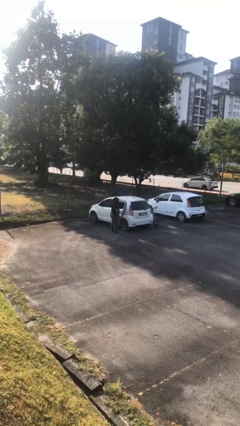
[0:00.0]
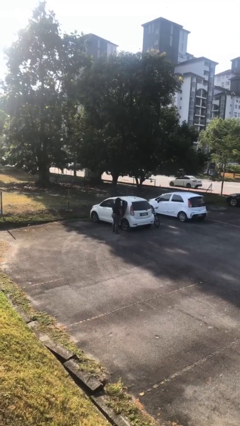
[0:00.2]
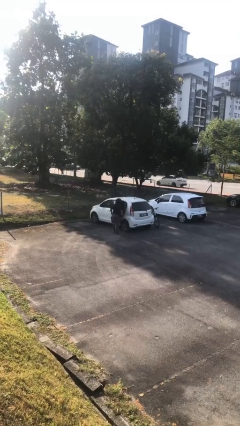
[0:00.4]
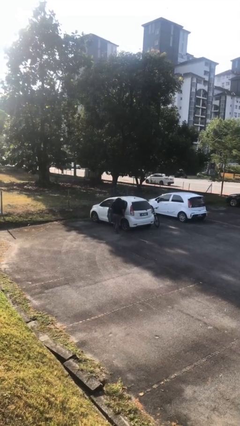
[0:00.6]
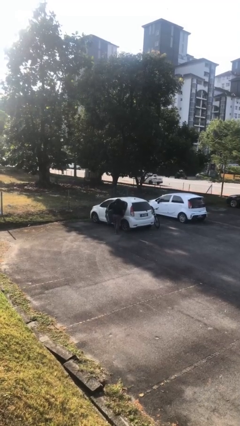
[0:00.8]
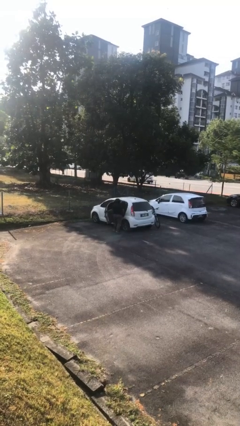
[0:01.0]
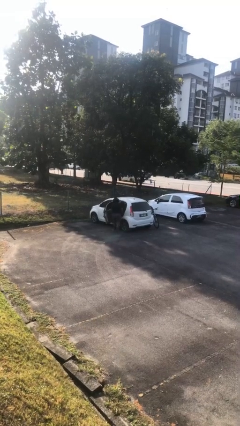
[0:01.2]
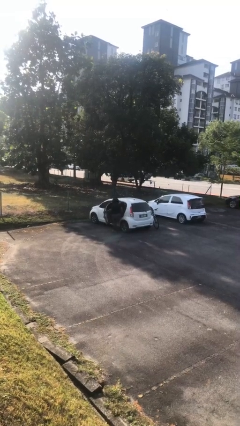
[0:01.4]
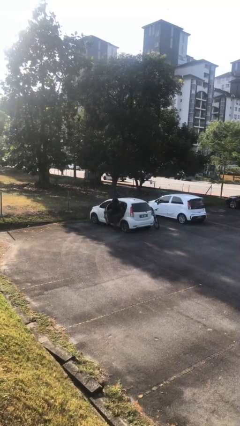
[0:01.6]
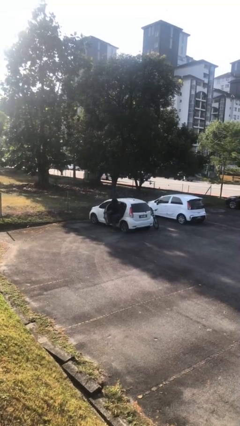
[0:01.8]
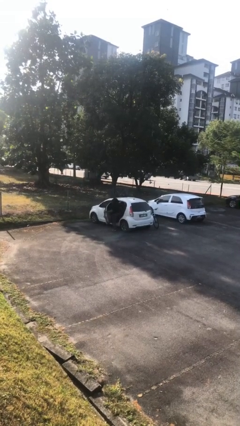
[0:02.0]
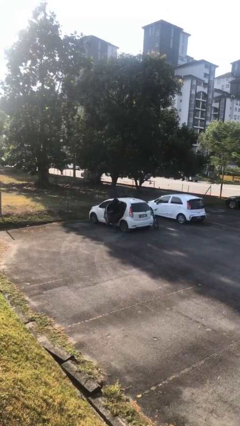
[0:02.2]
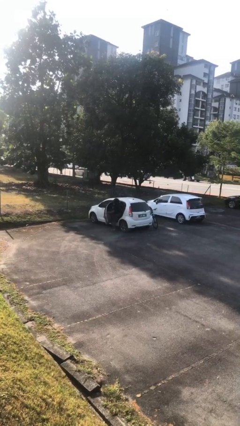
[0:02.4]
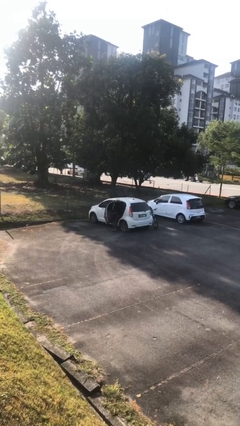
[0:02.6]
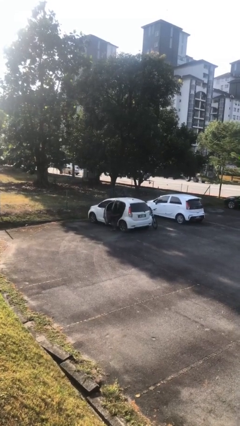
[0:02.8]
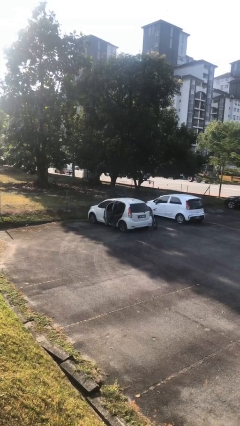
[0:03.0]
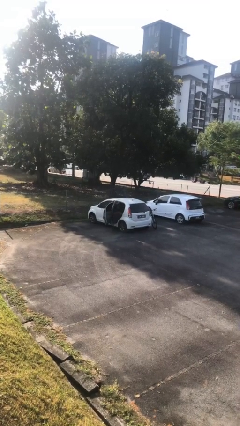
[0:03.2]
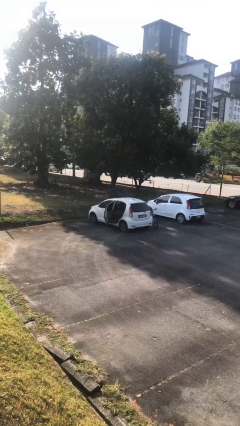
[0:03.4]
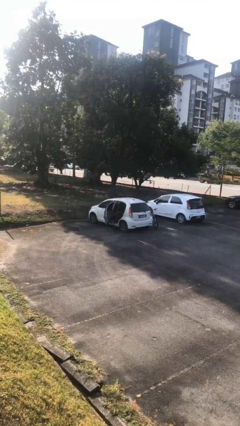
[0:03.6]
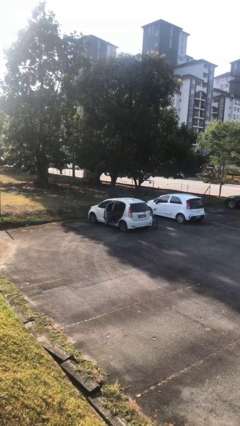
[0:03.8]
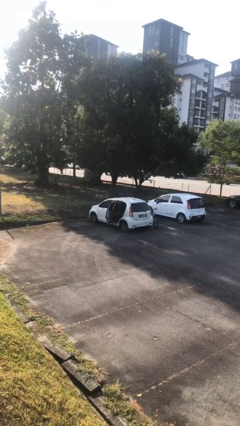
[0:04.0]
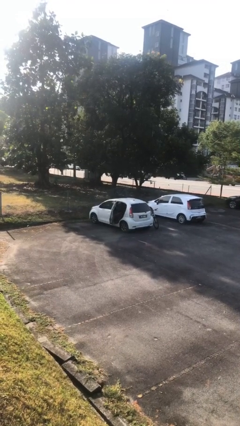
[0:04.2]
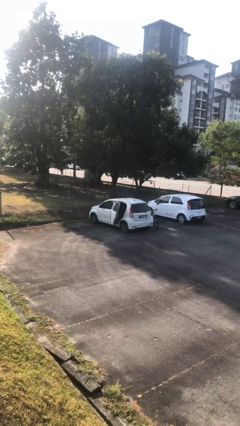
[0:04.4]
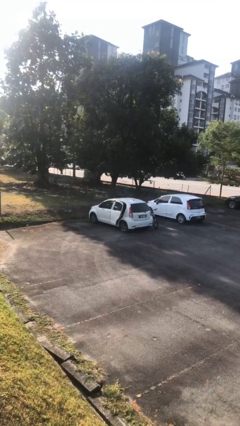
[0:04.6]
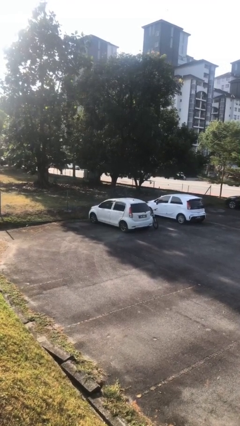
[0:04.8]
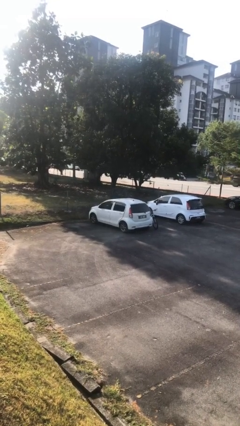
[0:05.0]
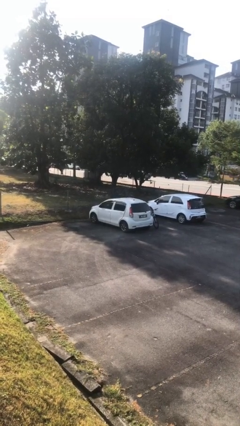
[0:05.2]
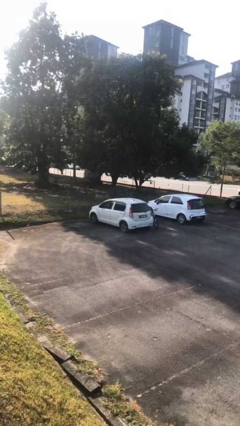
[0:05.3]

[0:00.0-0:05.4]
car picks up person

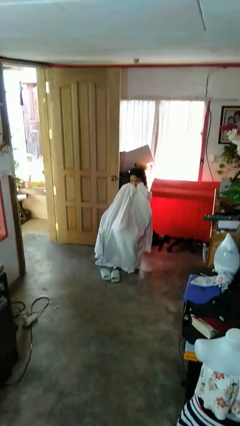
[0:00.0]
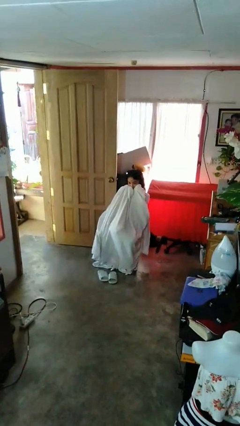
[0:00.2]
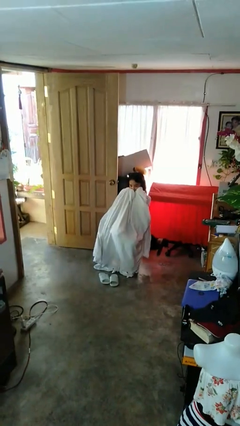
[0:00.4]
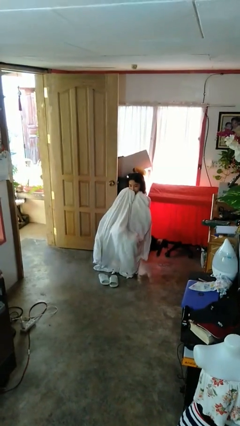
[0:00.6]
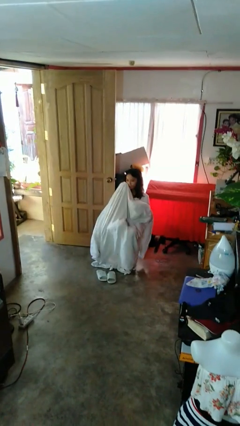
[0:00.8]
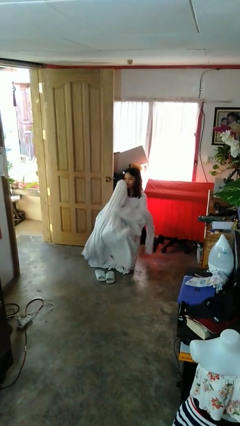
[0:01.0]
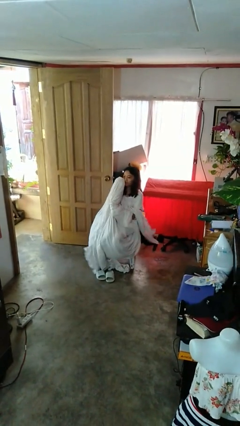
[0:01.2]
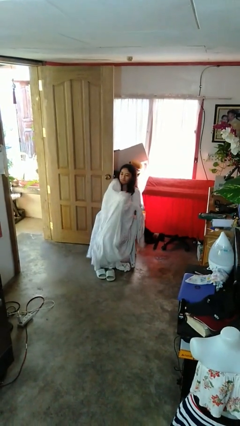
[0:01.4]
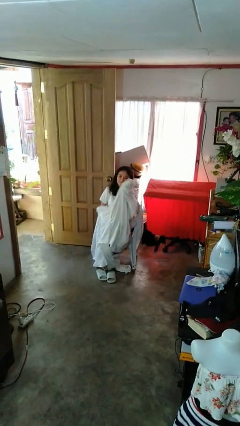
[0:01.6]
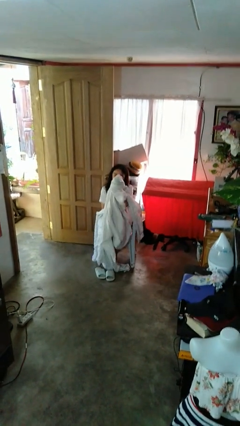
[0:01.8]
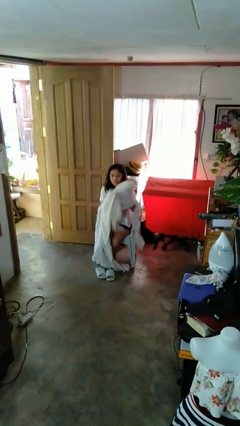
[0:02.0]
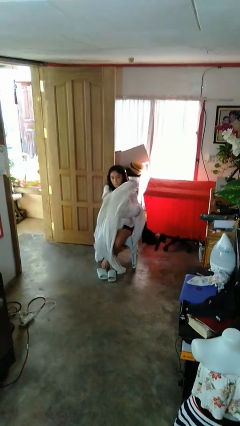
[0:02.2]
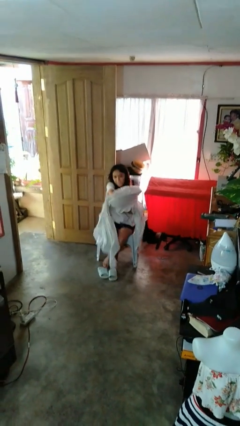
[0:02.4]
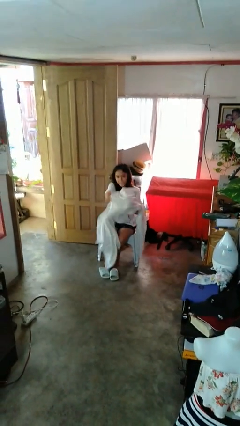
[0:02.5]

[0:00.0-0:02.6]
person uncovers with blanket

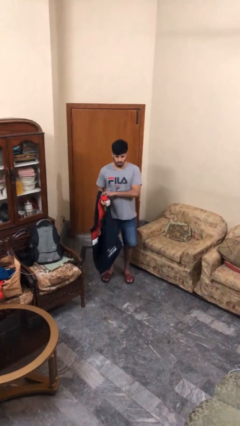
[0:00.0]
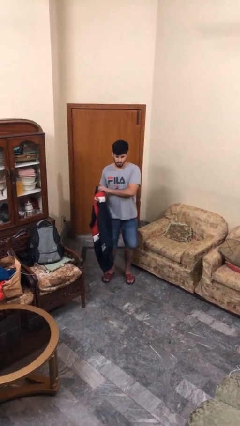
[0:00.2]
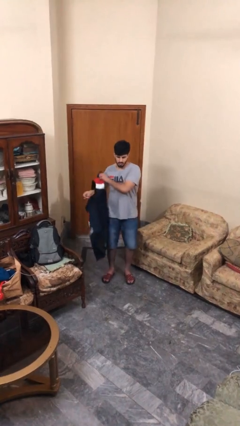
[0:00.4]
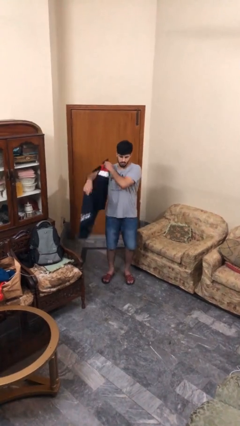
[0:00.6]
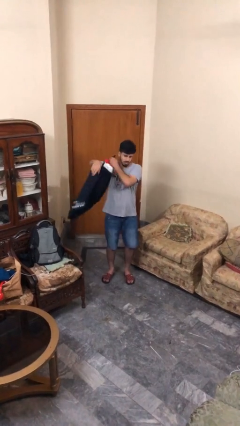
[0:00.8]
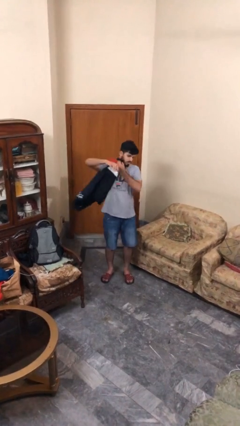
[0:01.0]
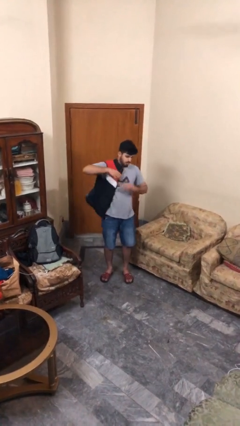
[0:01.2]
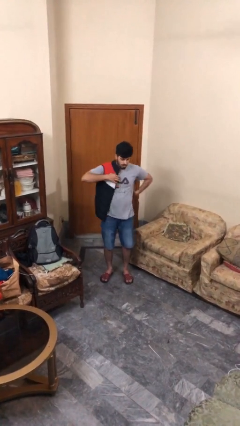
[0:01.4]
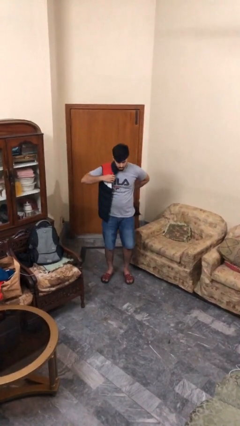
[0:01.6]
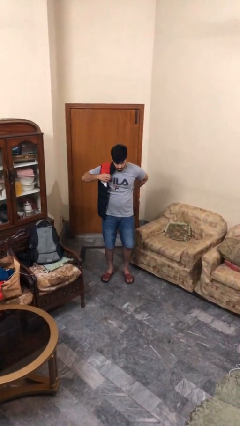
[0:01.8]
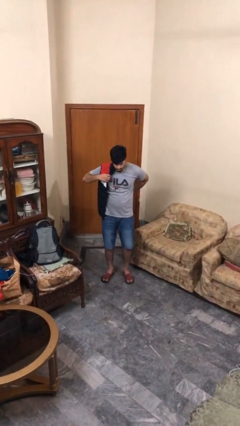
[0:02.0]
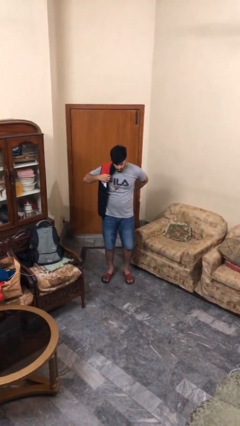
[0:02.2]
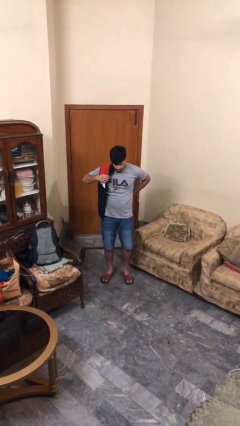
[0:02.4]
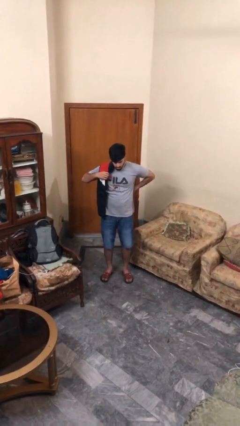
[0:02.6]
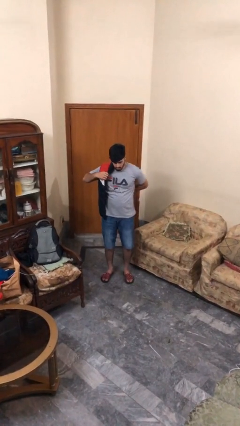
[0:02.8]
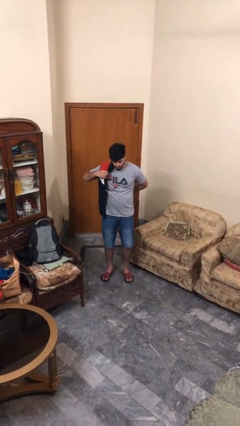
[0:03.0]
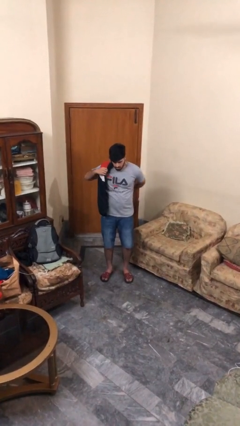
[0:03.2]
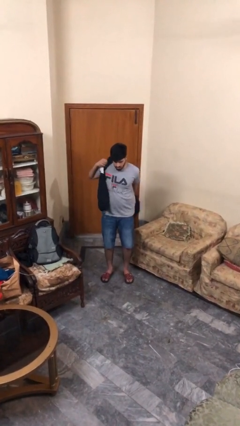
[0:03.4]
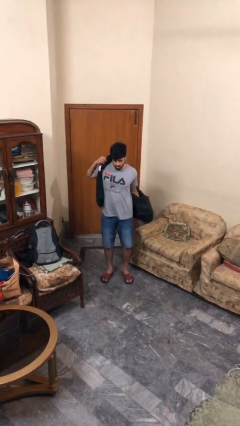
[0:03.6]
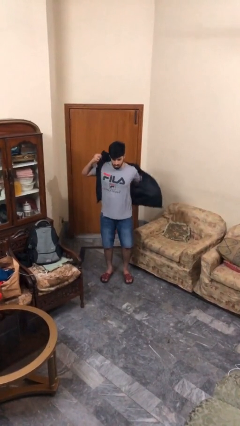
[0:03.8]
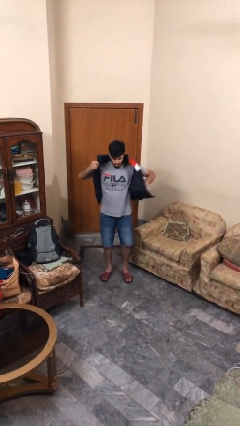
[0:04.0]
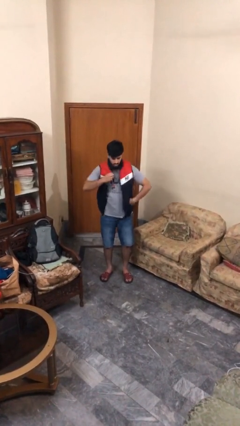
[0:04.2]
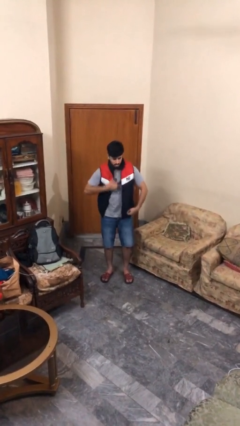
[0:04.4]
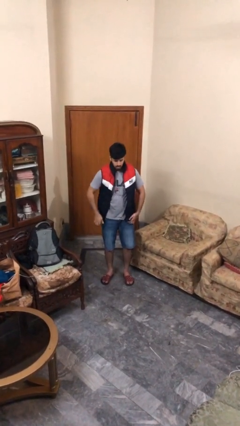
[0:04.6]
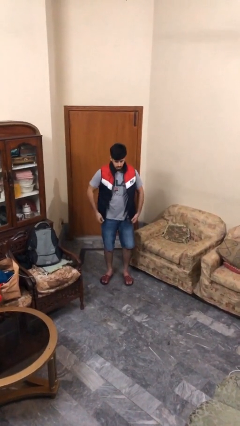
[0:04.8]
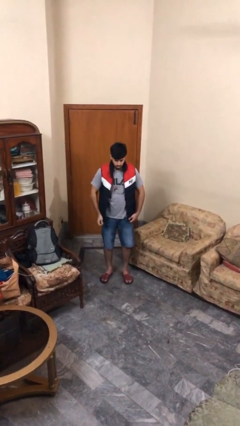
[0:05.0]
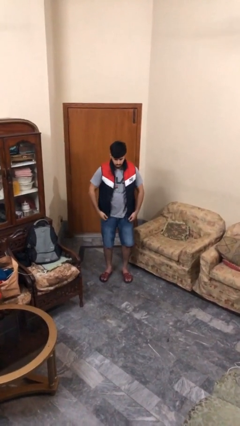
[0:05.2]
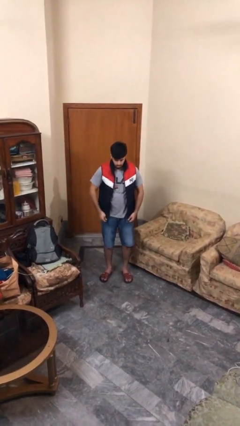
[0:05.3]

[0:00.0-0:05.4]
person puts on jacket

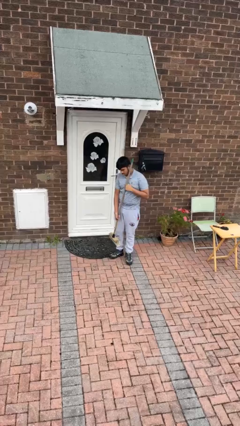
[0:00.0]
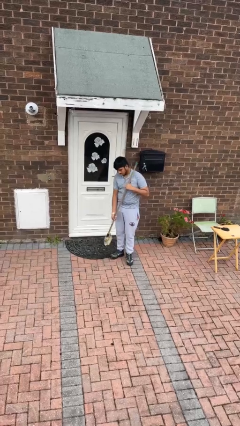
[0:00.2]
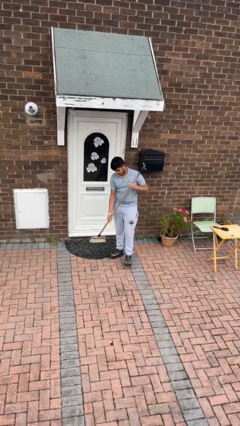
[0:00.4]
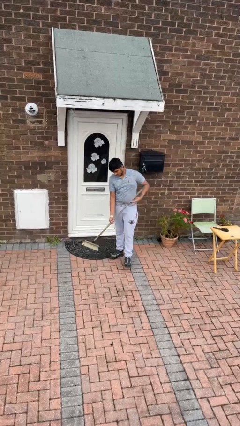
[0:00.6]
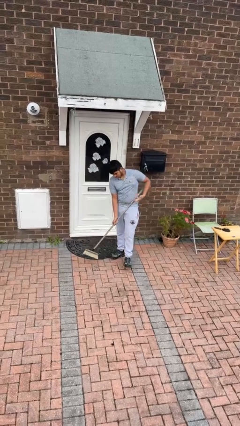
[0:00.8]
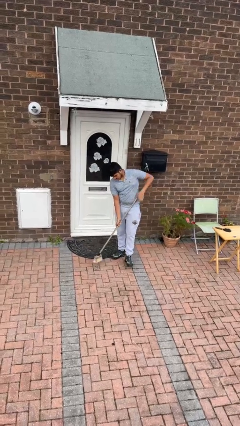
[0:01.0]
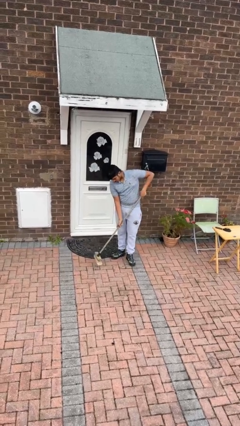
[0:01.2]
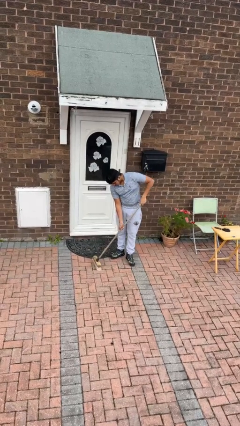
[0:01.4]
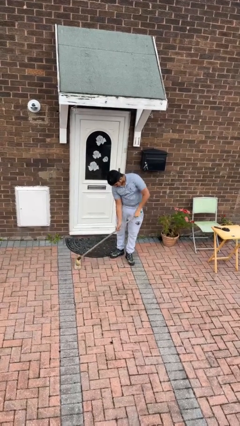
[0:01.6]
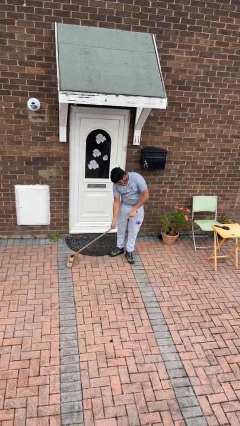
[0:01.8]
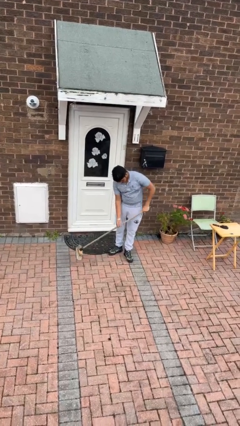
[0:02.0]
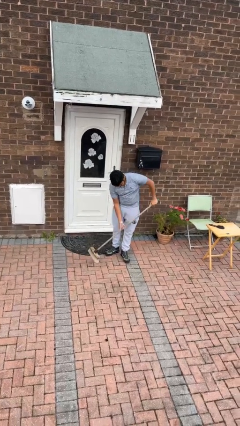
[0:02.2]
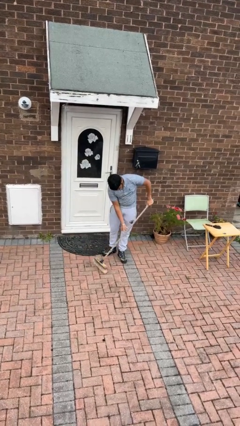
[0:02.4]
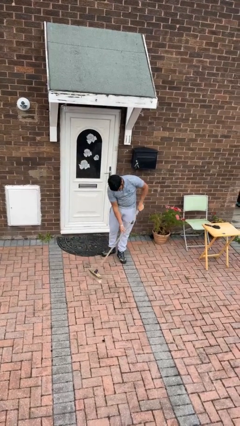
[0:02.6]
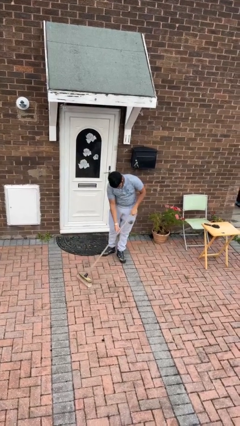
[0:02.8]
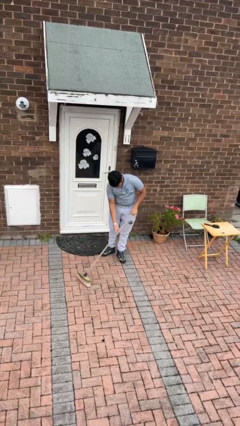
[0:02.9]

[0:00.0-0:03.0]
person sweeps floor

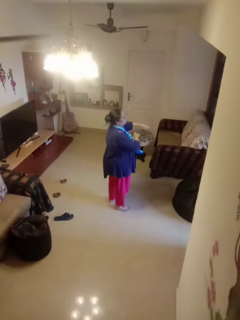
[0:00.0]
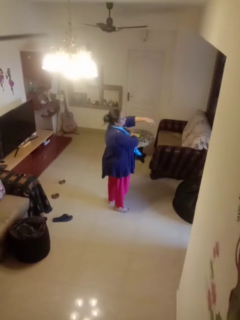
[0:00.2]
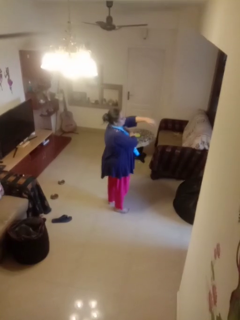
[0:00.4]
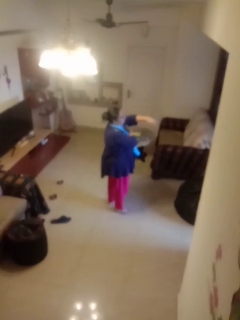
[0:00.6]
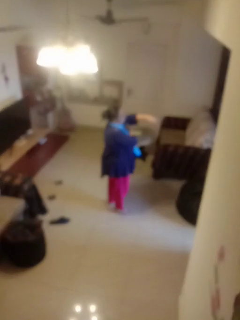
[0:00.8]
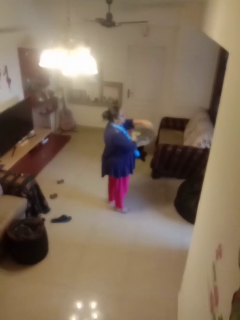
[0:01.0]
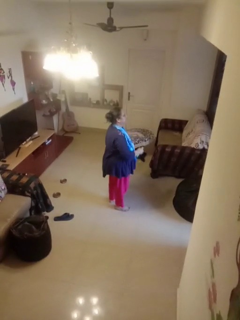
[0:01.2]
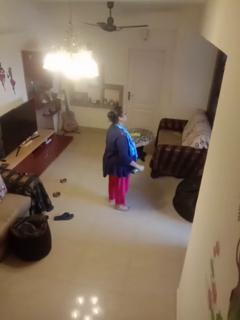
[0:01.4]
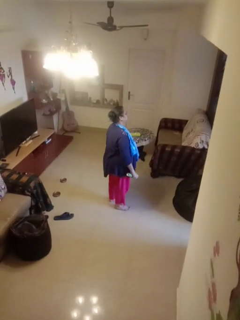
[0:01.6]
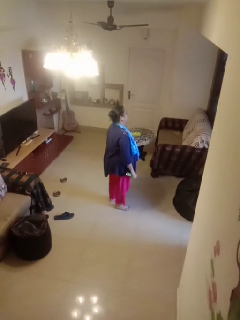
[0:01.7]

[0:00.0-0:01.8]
person applies deodorant
